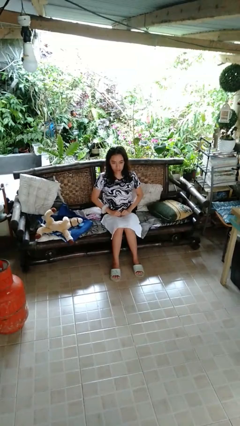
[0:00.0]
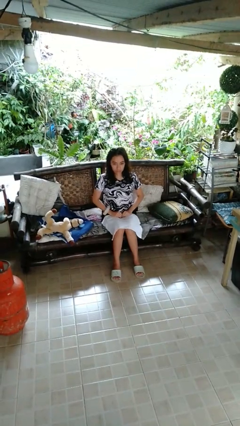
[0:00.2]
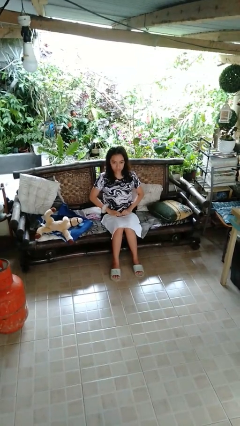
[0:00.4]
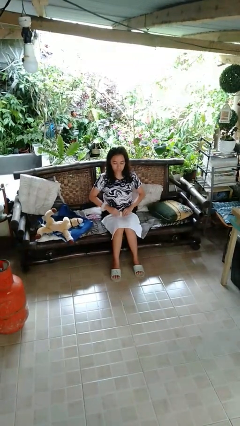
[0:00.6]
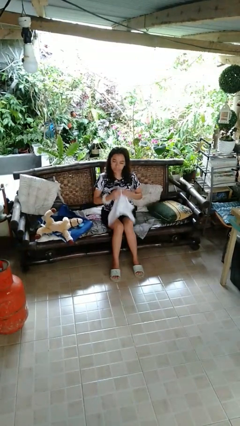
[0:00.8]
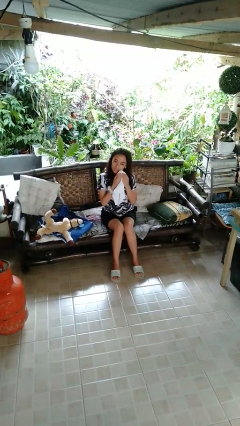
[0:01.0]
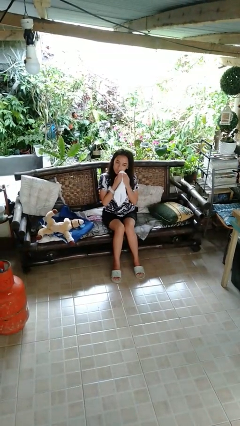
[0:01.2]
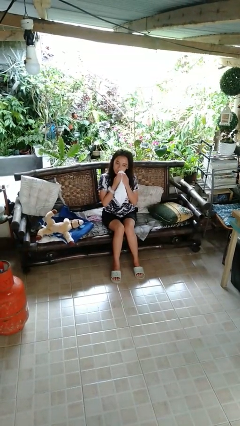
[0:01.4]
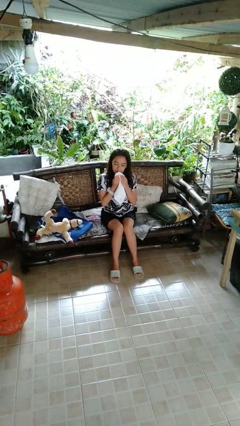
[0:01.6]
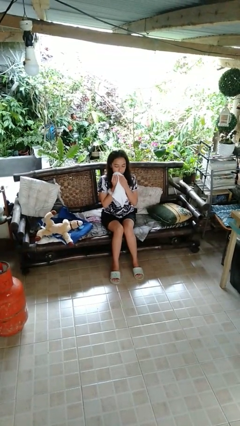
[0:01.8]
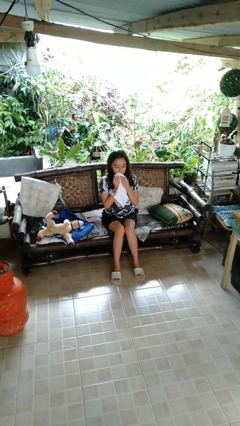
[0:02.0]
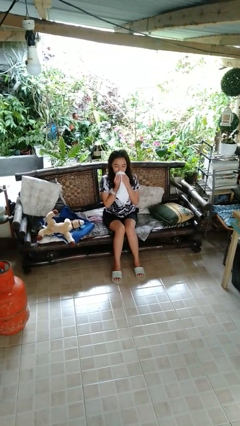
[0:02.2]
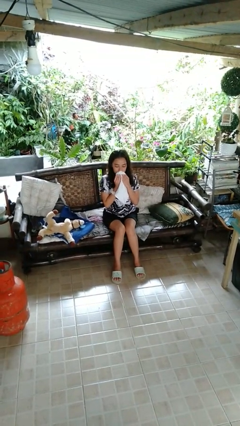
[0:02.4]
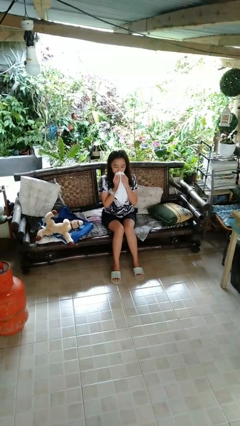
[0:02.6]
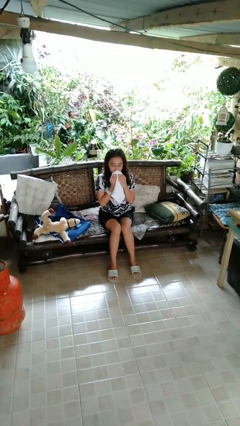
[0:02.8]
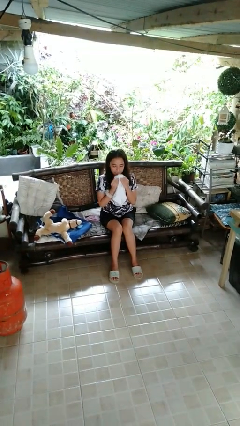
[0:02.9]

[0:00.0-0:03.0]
person wipes mouth with napkin

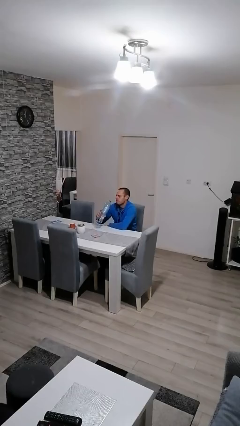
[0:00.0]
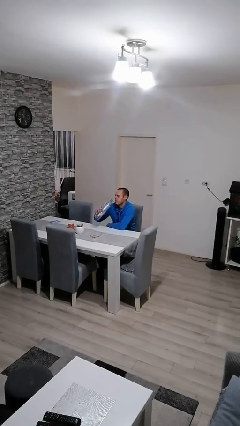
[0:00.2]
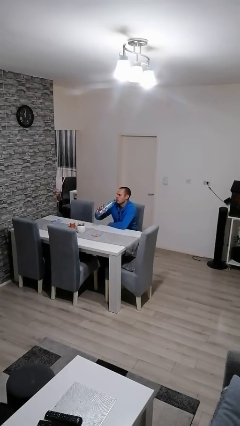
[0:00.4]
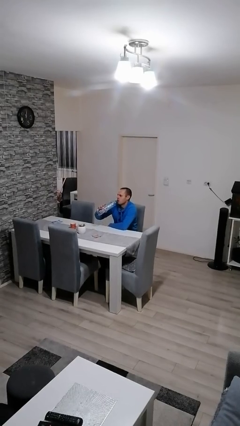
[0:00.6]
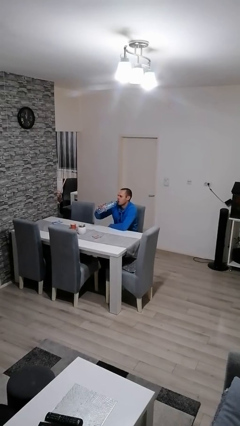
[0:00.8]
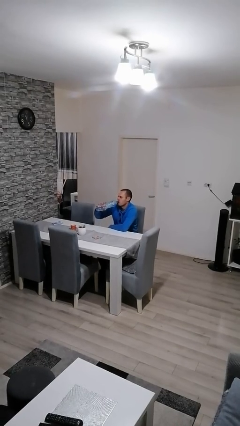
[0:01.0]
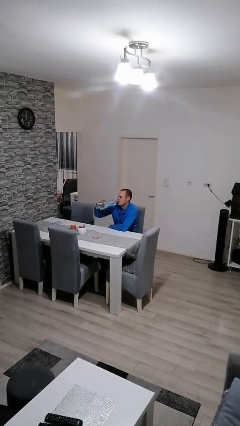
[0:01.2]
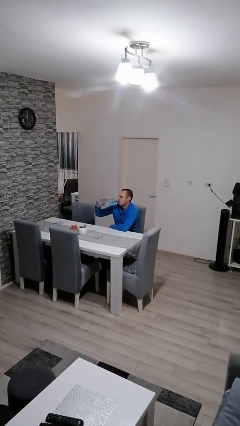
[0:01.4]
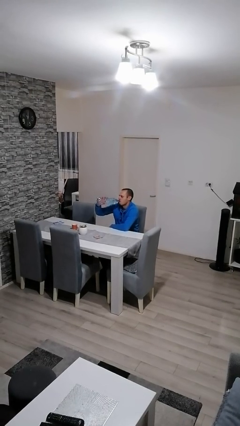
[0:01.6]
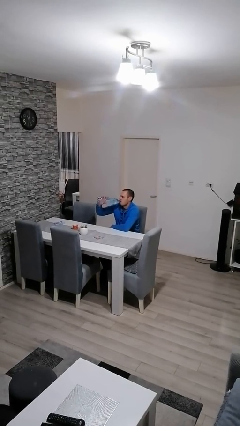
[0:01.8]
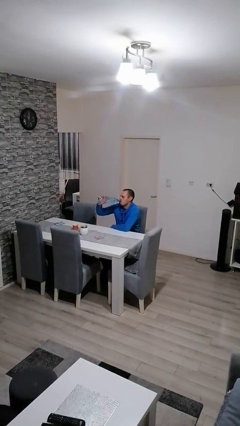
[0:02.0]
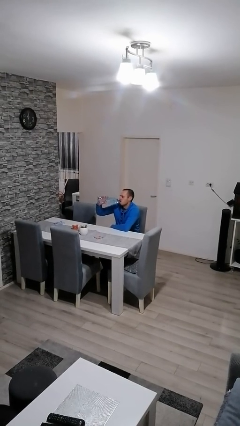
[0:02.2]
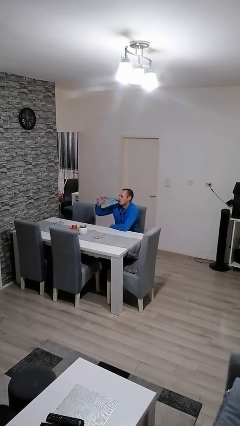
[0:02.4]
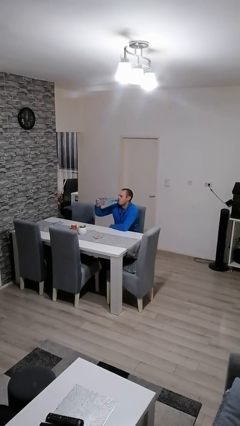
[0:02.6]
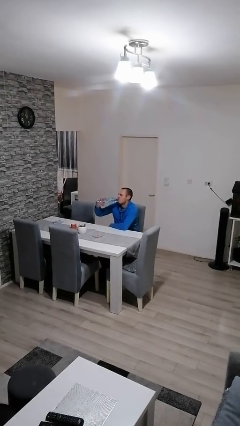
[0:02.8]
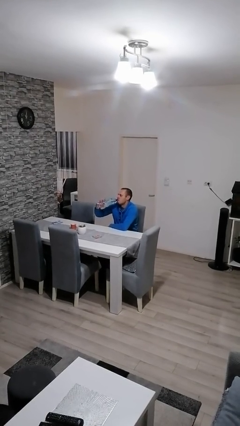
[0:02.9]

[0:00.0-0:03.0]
person drinks from bottle

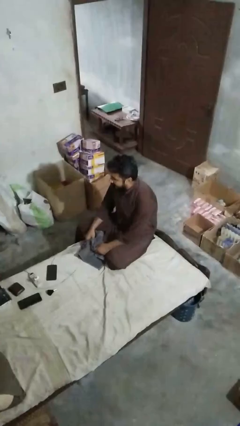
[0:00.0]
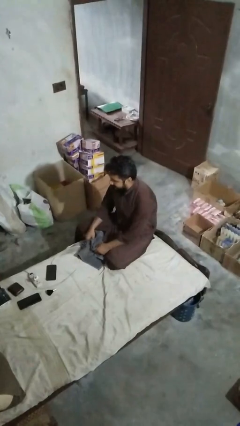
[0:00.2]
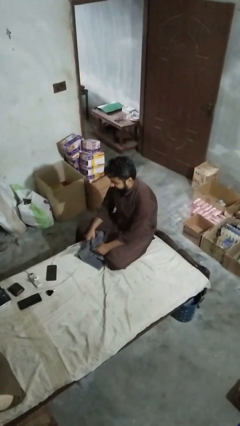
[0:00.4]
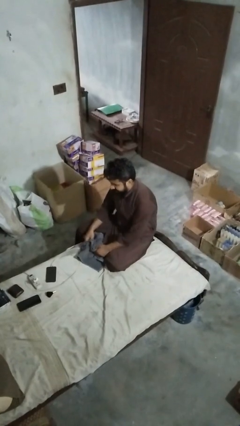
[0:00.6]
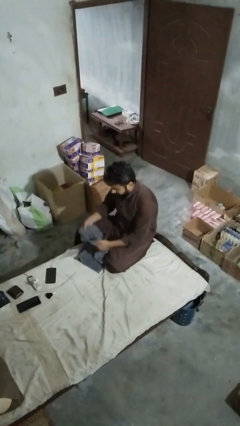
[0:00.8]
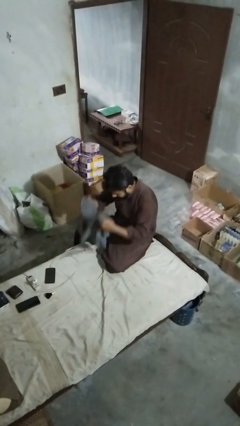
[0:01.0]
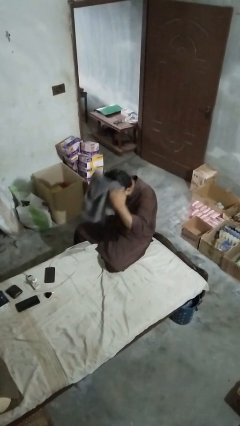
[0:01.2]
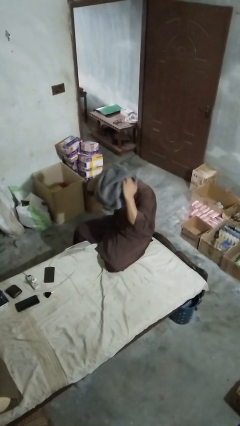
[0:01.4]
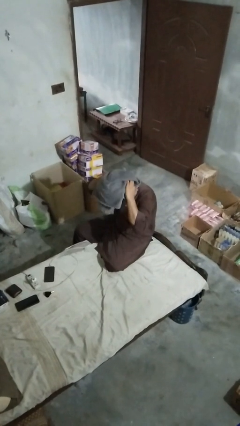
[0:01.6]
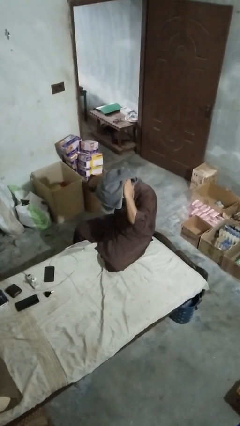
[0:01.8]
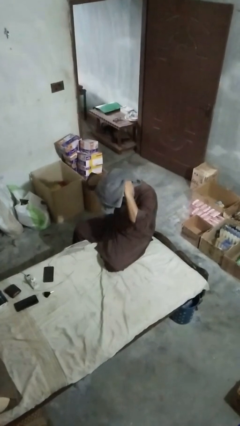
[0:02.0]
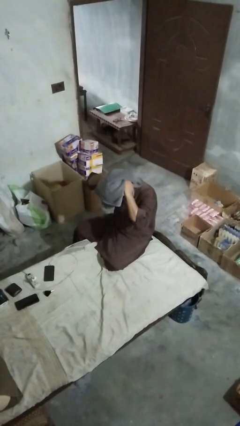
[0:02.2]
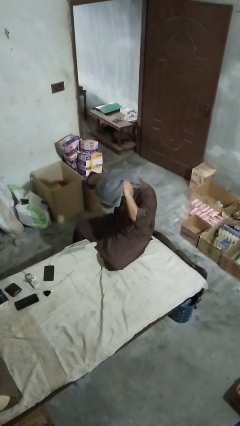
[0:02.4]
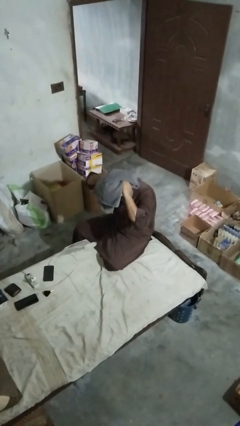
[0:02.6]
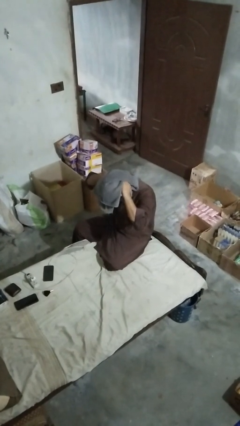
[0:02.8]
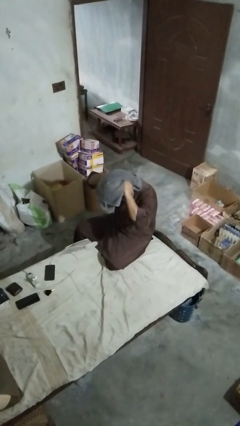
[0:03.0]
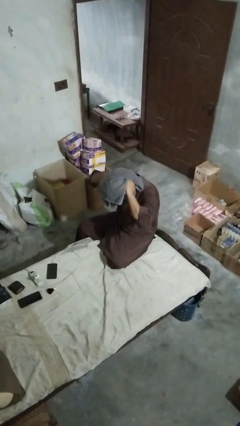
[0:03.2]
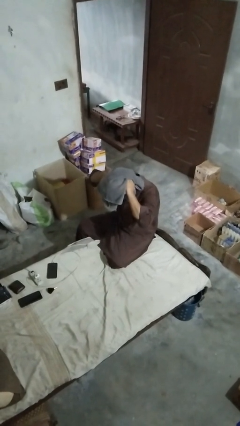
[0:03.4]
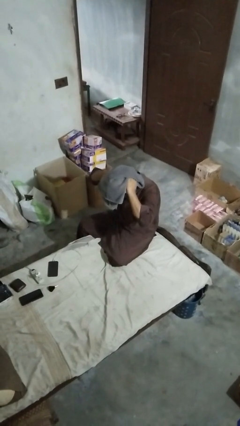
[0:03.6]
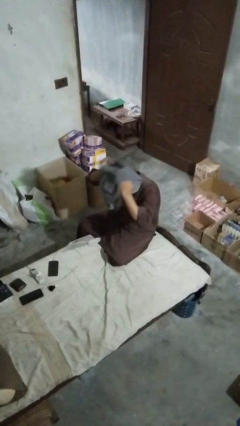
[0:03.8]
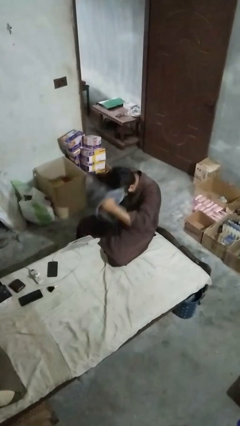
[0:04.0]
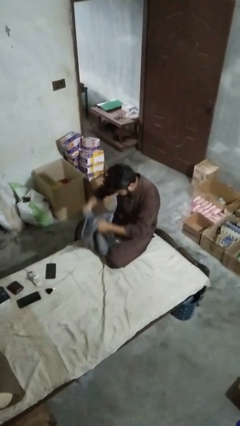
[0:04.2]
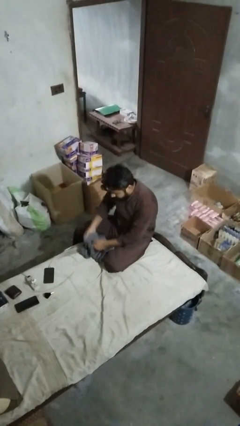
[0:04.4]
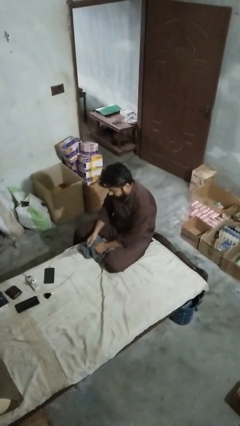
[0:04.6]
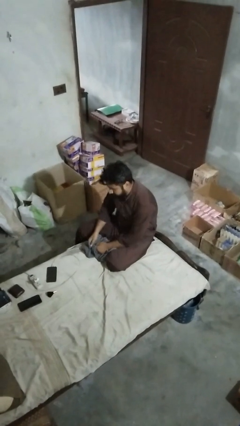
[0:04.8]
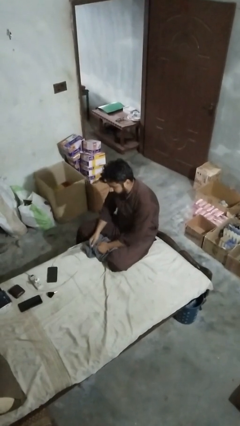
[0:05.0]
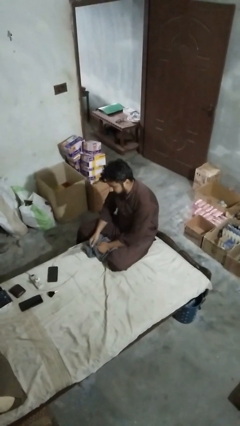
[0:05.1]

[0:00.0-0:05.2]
person dries hair with towel

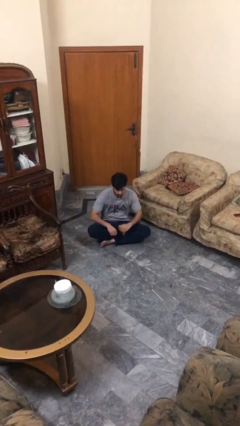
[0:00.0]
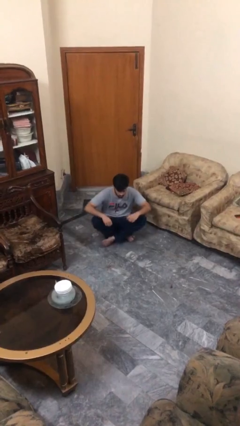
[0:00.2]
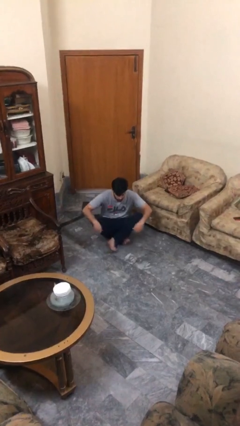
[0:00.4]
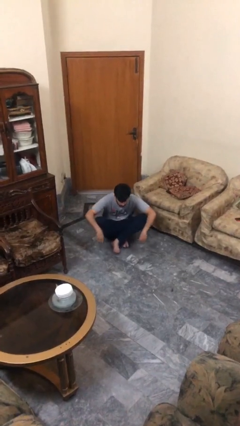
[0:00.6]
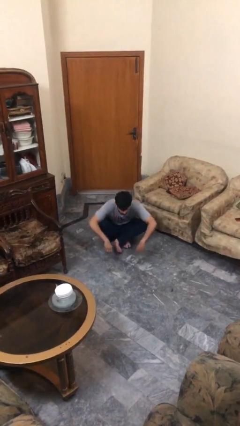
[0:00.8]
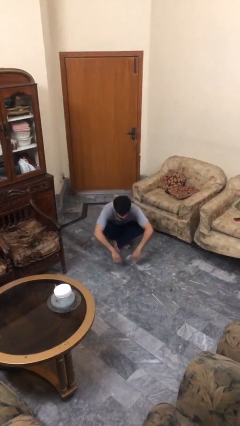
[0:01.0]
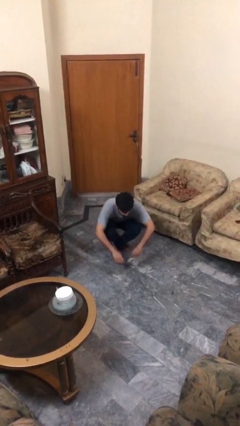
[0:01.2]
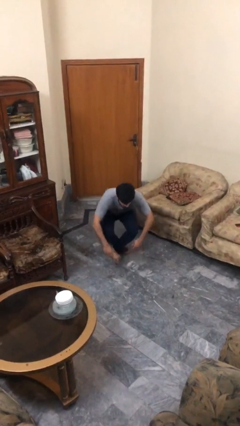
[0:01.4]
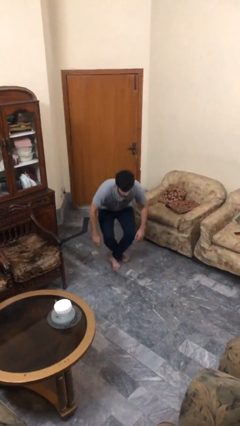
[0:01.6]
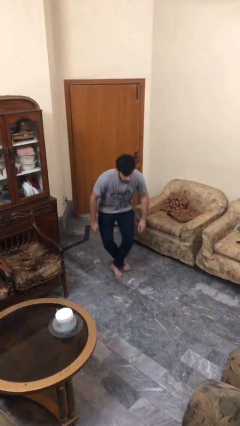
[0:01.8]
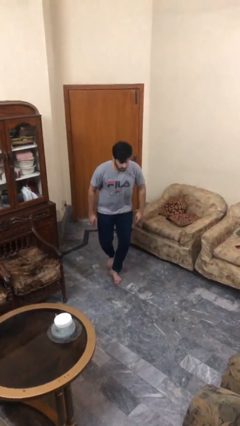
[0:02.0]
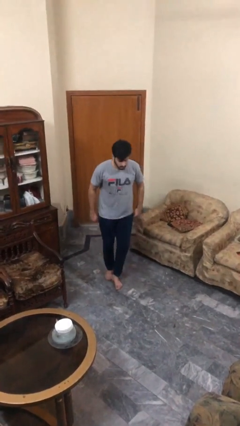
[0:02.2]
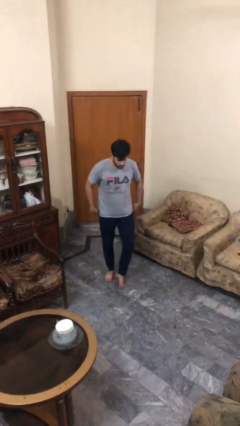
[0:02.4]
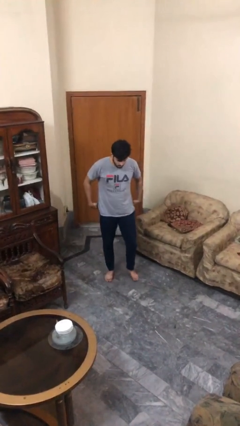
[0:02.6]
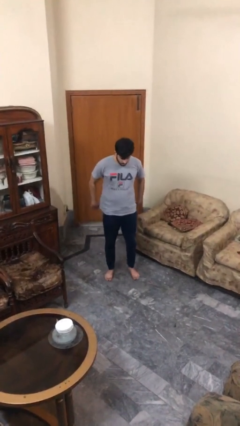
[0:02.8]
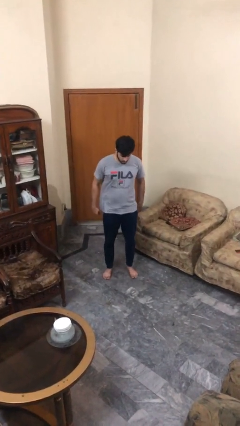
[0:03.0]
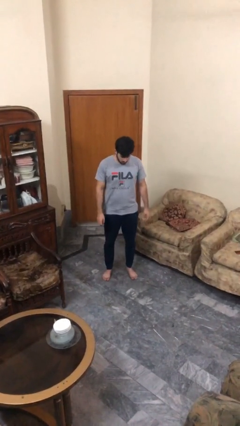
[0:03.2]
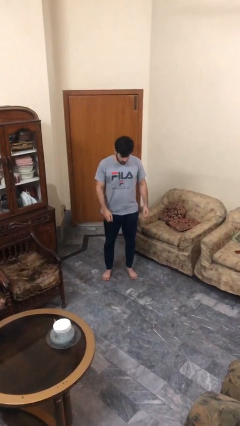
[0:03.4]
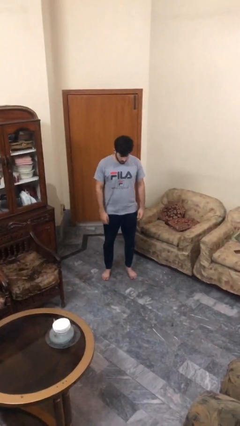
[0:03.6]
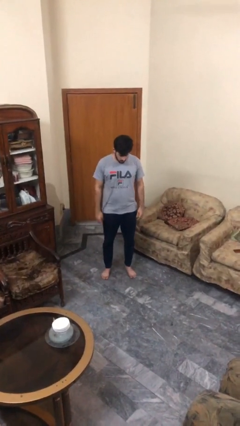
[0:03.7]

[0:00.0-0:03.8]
person stands up from floor

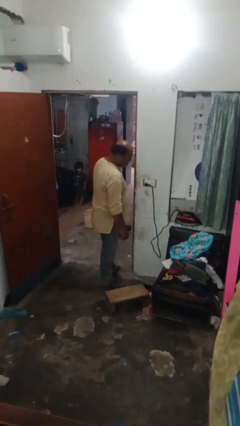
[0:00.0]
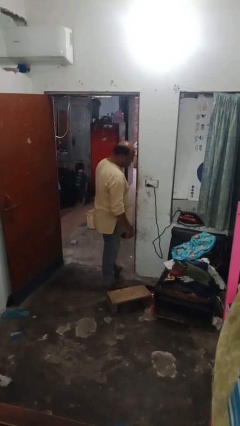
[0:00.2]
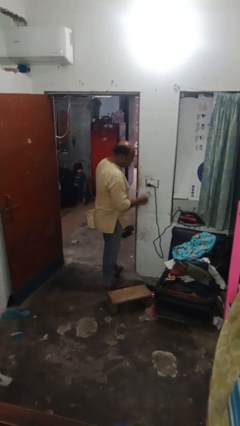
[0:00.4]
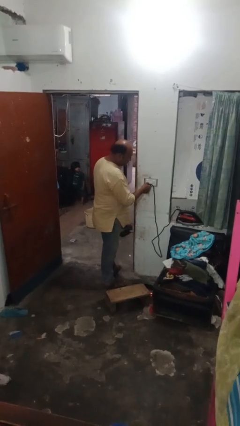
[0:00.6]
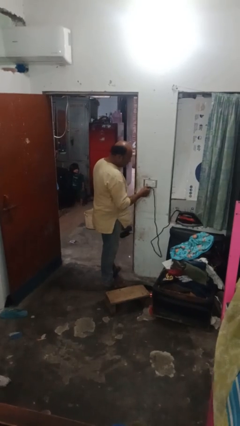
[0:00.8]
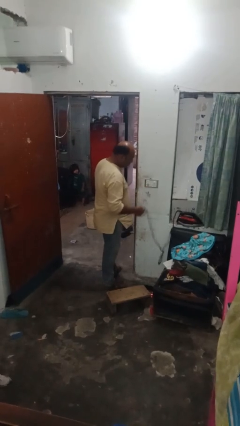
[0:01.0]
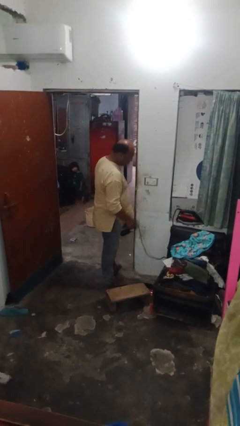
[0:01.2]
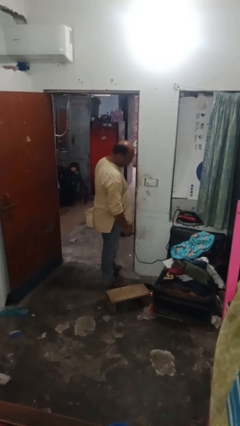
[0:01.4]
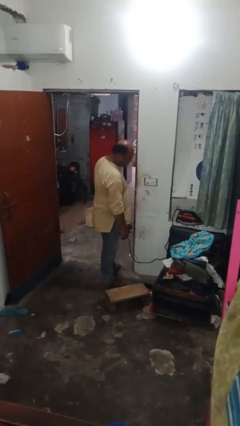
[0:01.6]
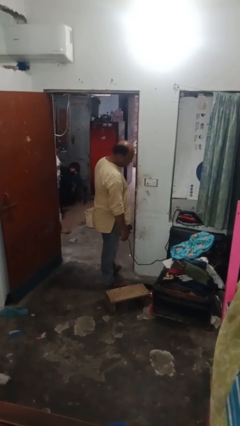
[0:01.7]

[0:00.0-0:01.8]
person unplugs from electrical socket

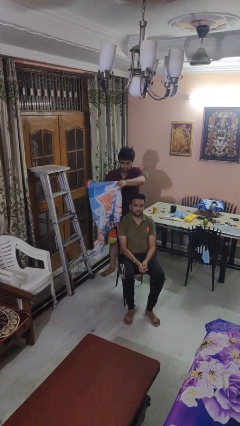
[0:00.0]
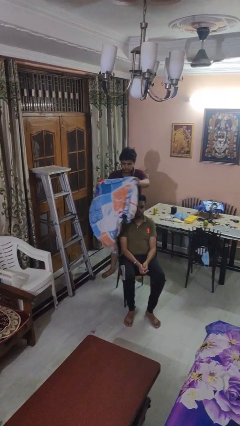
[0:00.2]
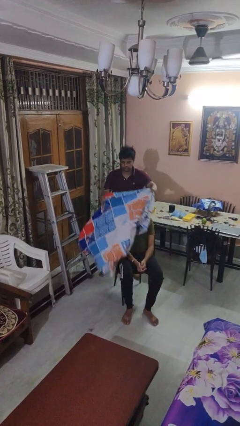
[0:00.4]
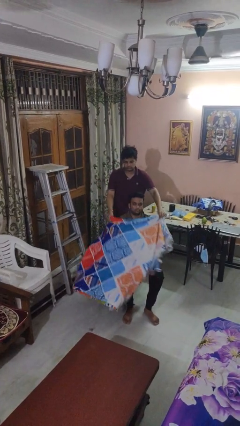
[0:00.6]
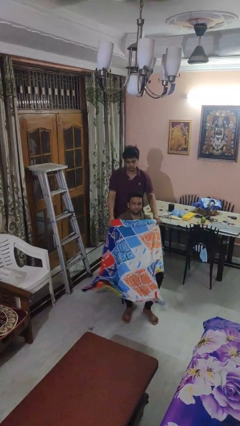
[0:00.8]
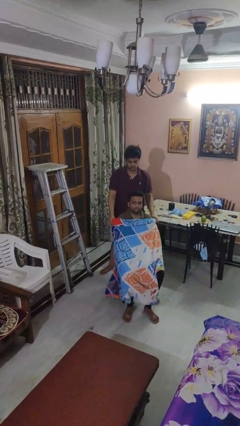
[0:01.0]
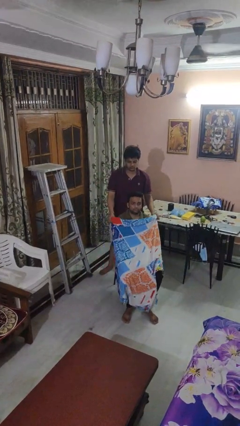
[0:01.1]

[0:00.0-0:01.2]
person covers friend with blanket
